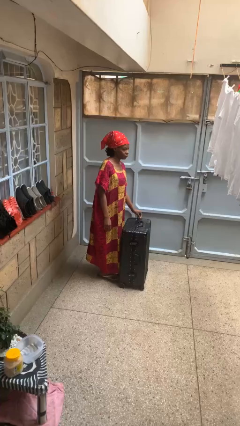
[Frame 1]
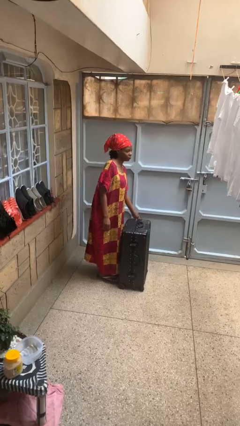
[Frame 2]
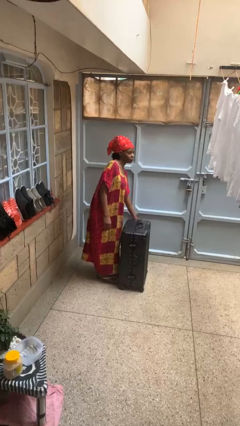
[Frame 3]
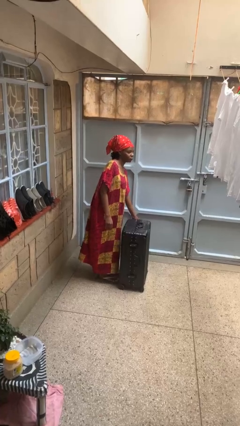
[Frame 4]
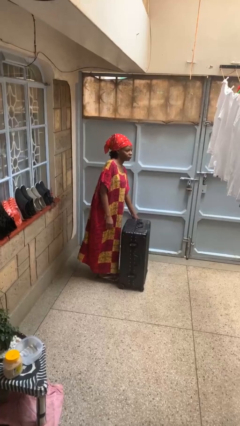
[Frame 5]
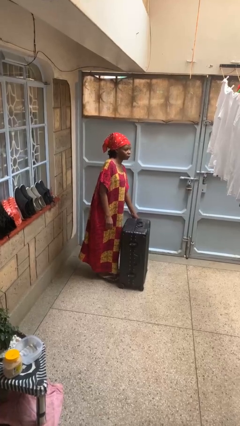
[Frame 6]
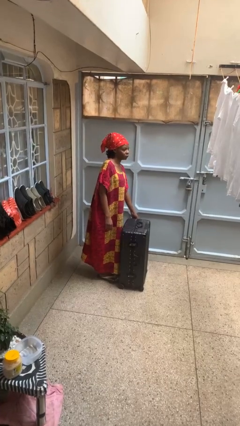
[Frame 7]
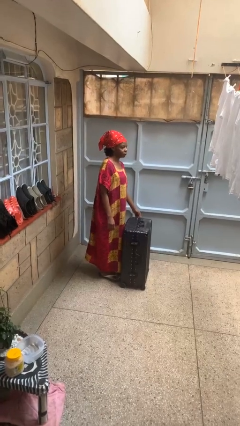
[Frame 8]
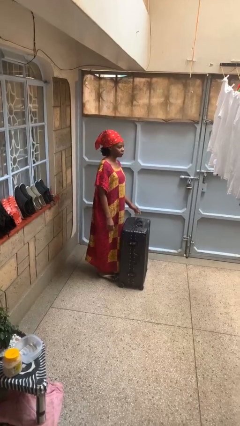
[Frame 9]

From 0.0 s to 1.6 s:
person closes suitcase

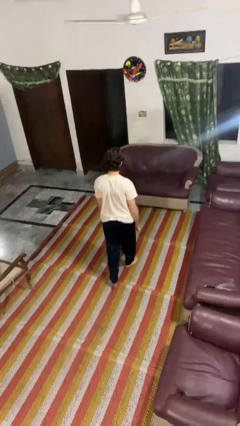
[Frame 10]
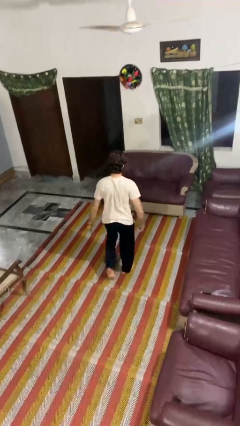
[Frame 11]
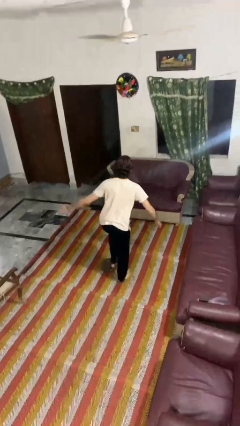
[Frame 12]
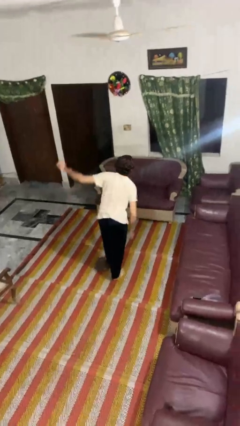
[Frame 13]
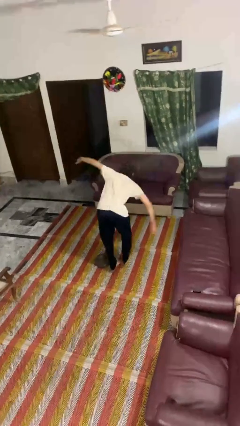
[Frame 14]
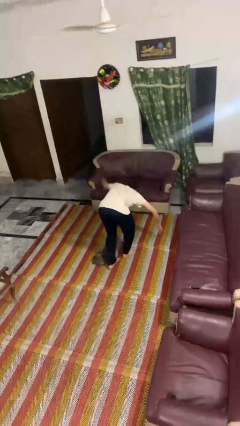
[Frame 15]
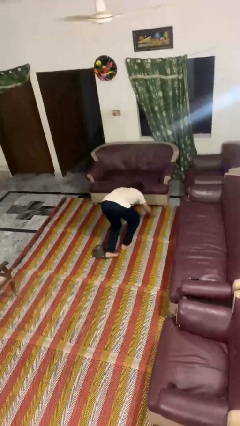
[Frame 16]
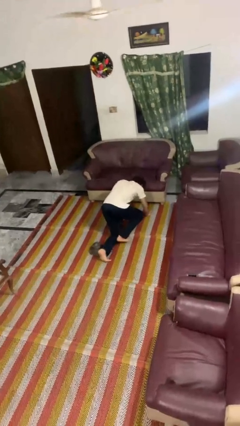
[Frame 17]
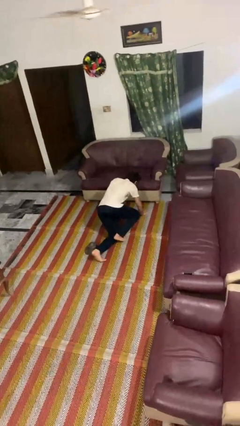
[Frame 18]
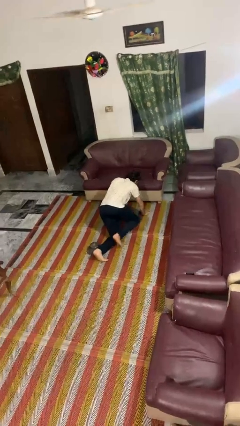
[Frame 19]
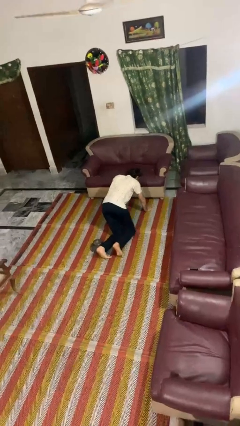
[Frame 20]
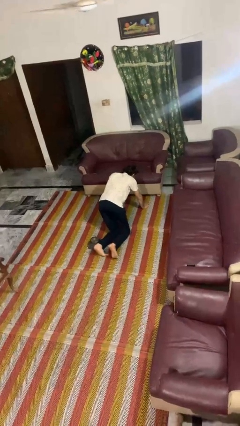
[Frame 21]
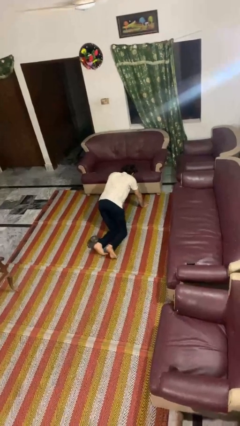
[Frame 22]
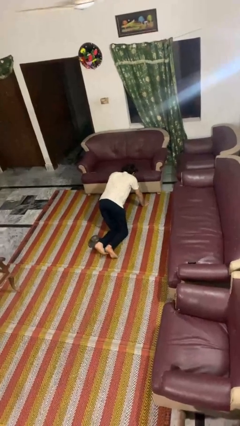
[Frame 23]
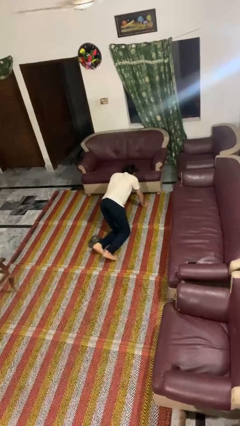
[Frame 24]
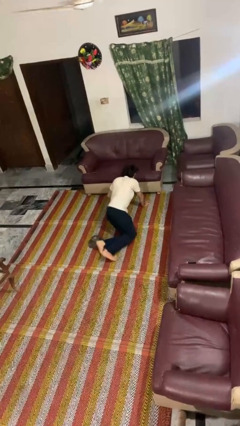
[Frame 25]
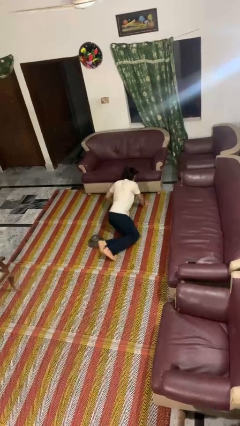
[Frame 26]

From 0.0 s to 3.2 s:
person trips on object on floor

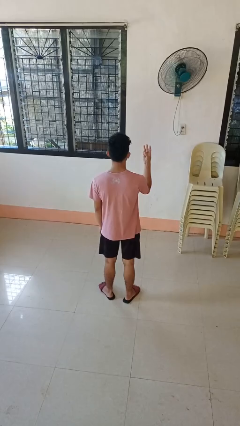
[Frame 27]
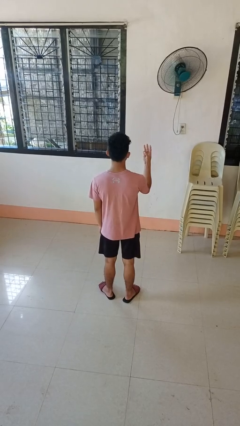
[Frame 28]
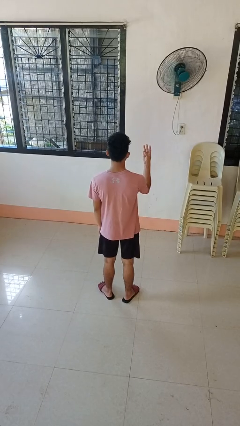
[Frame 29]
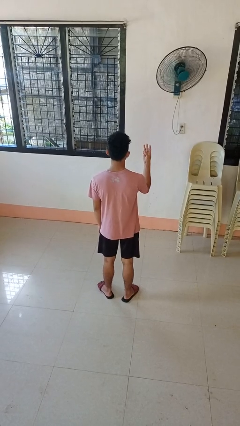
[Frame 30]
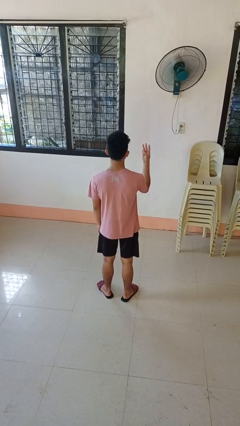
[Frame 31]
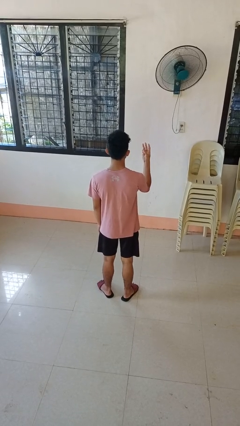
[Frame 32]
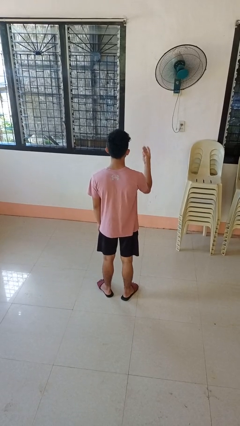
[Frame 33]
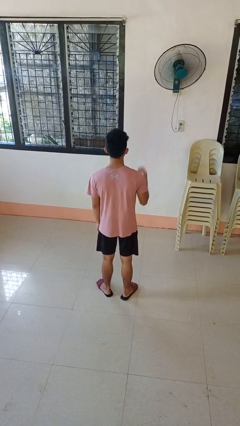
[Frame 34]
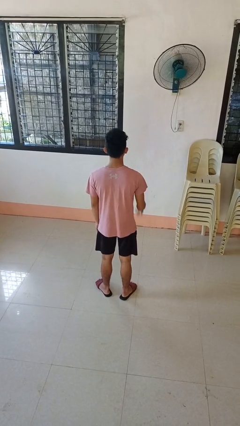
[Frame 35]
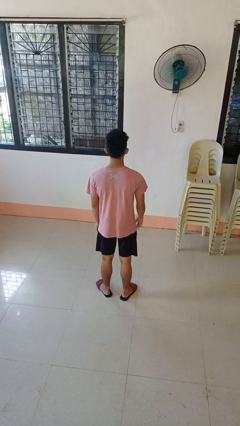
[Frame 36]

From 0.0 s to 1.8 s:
person gestures number three

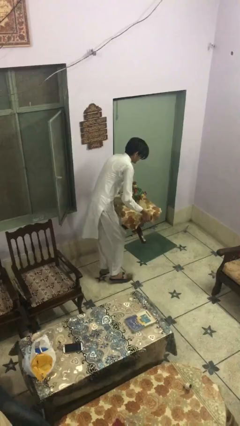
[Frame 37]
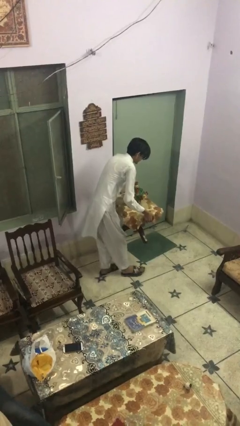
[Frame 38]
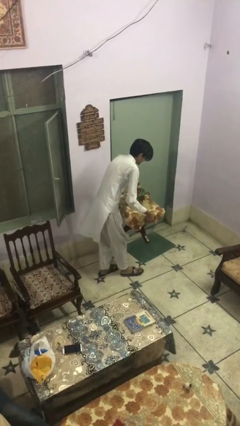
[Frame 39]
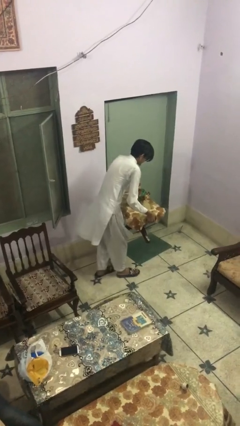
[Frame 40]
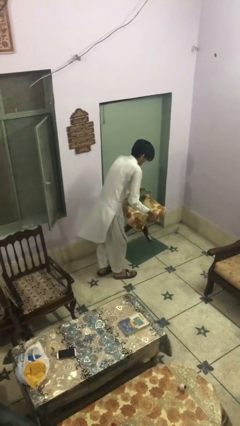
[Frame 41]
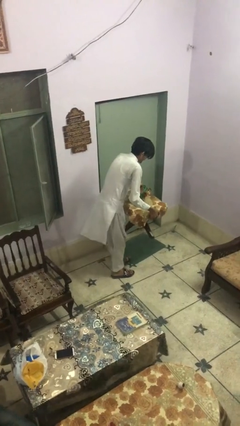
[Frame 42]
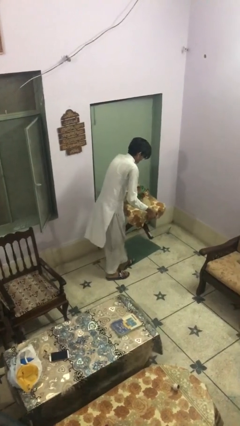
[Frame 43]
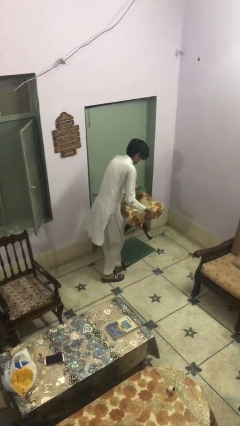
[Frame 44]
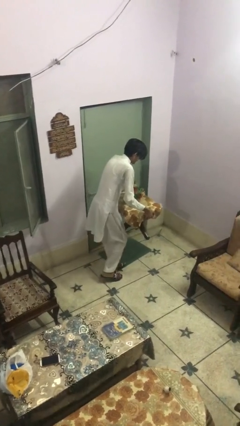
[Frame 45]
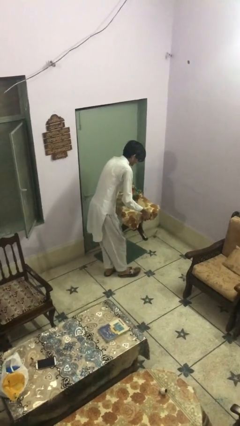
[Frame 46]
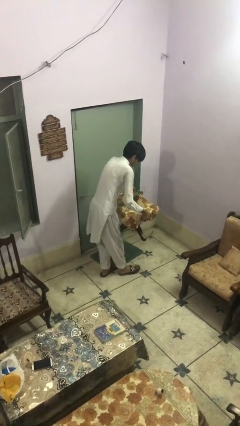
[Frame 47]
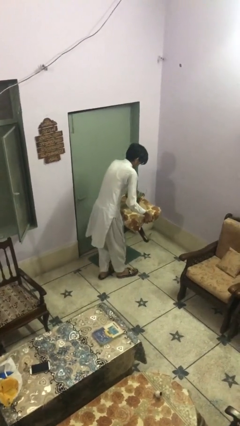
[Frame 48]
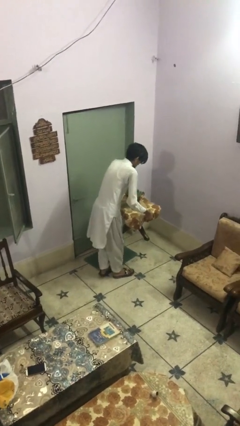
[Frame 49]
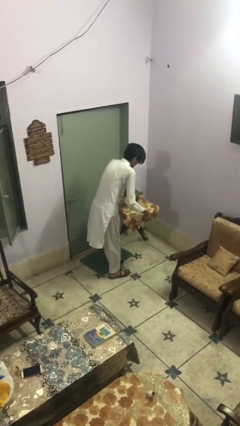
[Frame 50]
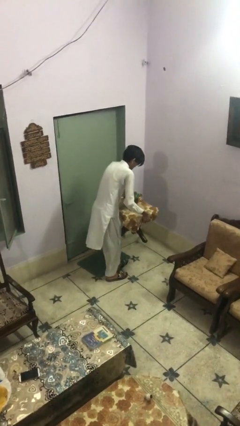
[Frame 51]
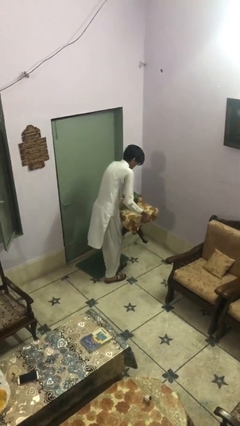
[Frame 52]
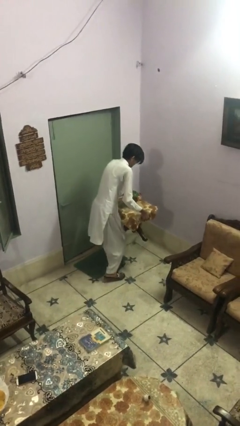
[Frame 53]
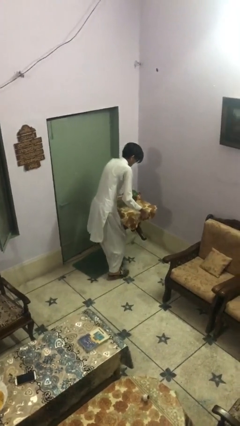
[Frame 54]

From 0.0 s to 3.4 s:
person carries heavy object

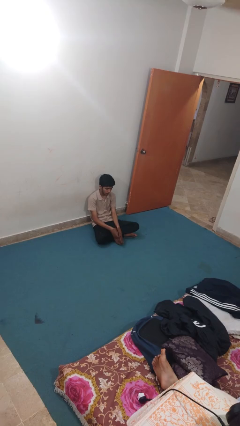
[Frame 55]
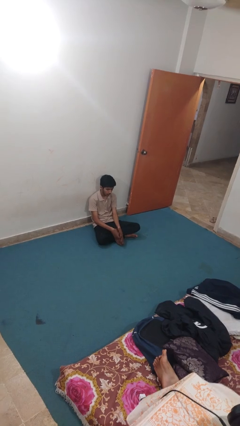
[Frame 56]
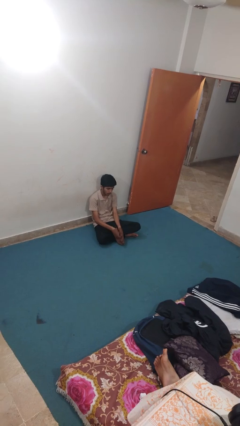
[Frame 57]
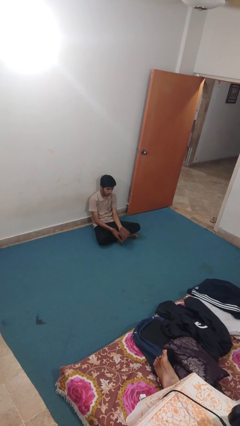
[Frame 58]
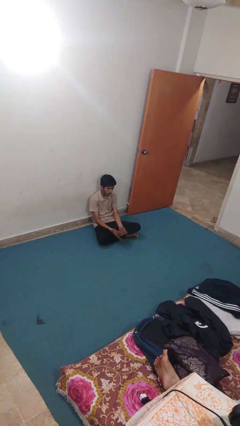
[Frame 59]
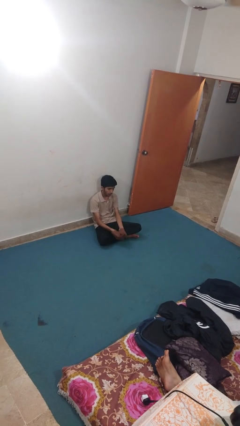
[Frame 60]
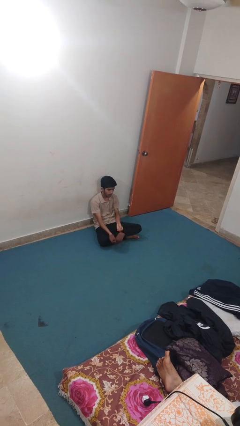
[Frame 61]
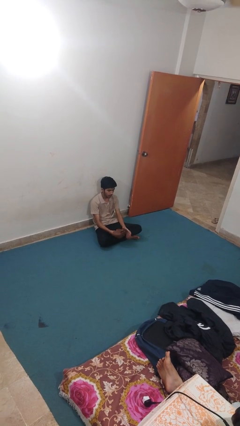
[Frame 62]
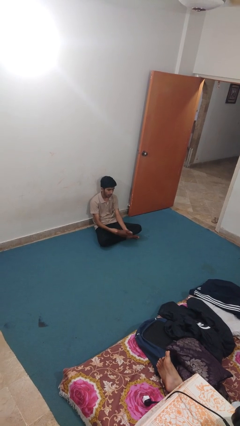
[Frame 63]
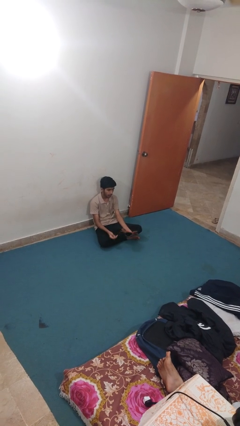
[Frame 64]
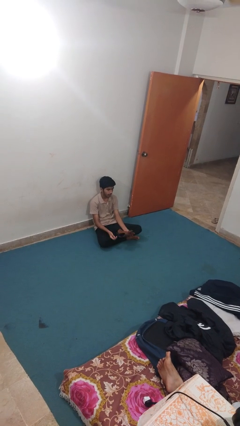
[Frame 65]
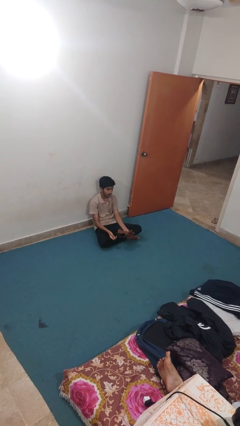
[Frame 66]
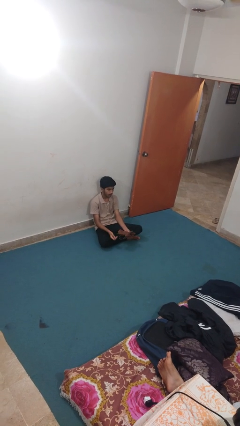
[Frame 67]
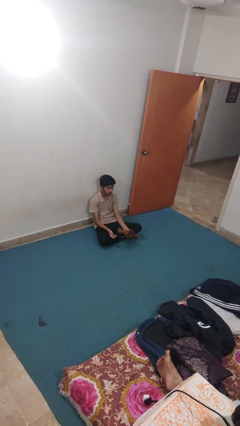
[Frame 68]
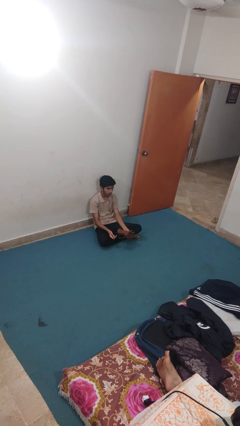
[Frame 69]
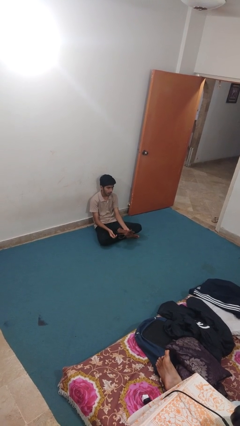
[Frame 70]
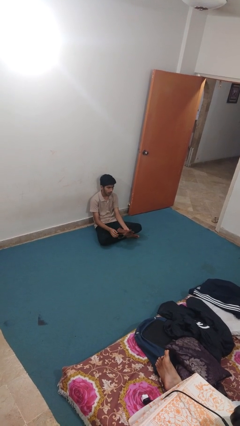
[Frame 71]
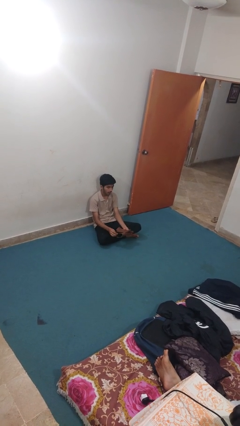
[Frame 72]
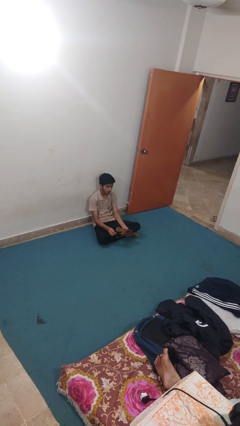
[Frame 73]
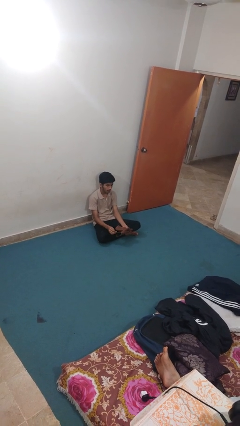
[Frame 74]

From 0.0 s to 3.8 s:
person takes off gloves

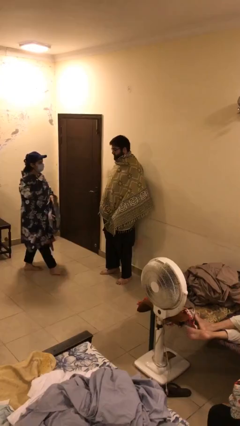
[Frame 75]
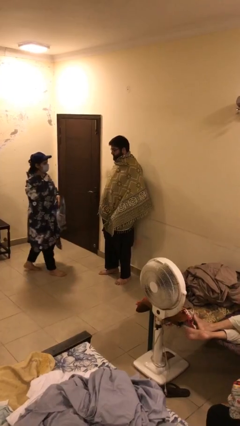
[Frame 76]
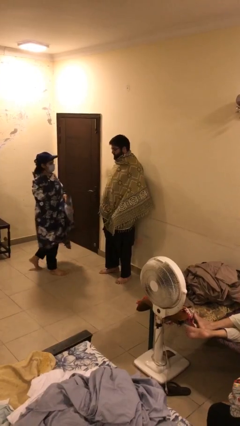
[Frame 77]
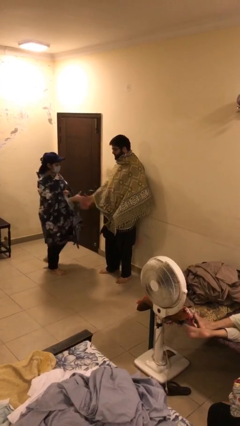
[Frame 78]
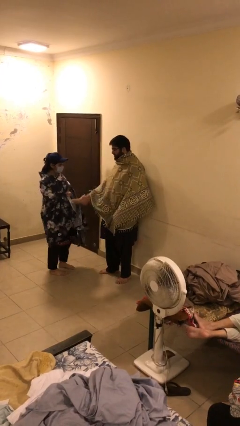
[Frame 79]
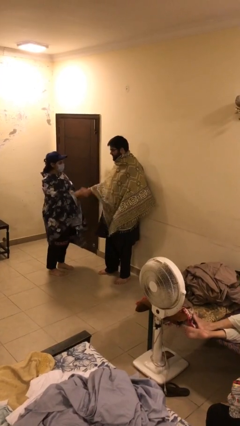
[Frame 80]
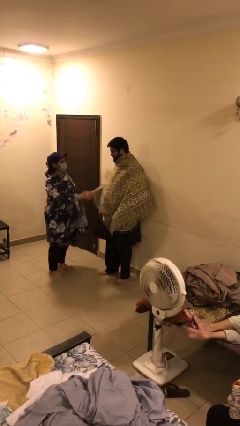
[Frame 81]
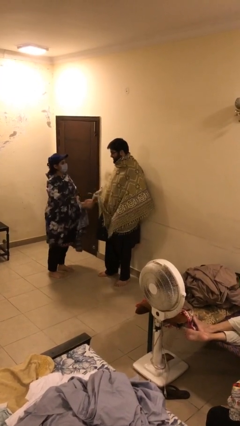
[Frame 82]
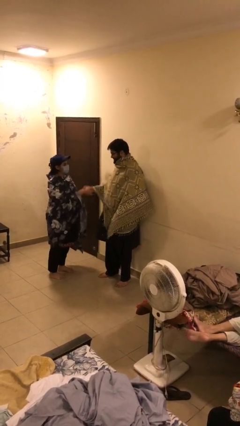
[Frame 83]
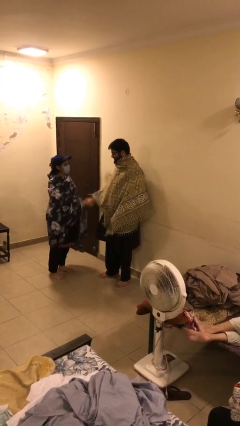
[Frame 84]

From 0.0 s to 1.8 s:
person shakes hand

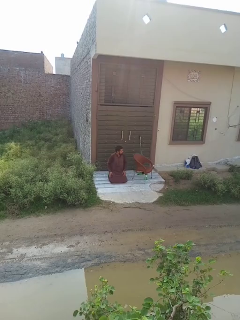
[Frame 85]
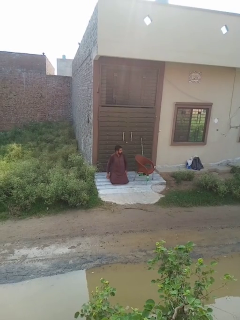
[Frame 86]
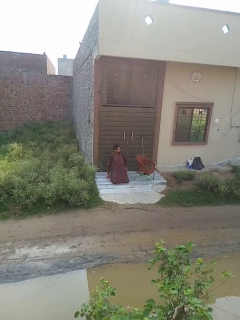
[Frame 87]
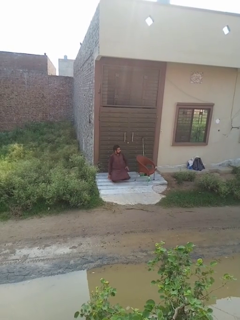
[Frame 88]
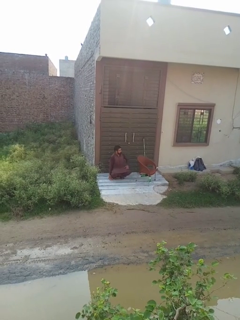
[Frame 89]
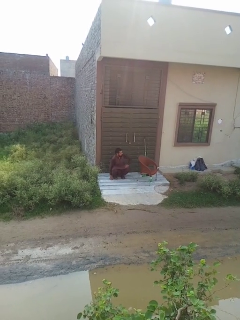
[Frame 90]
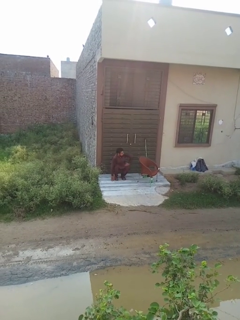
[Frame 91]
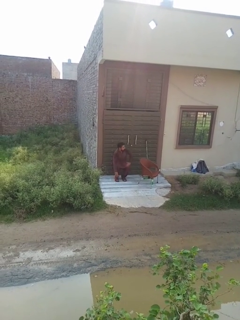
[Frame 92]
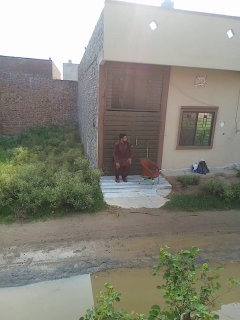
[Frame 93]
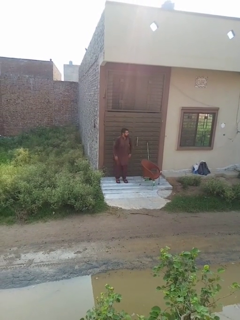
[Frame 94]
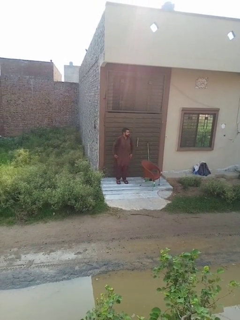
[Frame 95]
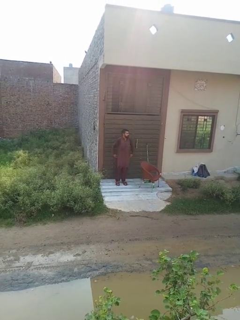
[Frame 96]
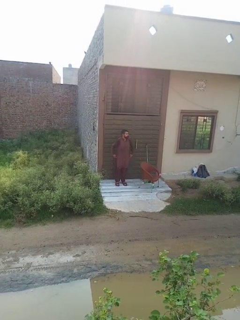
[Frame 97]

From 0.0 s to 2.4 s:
person stands up from floor
